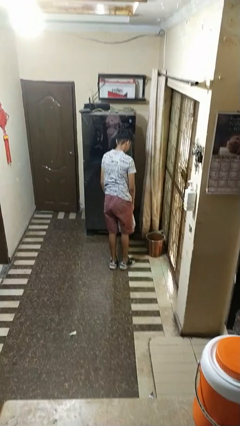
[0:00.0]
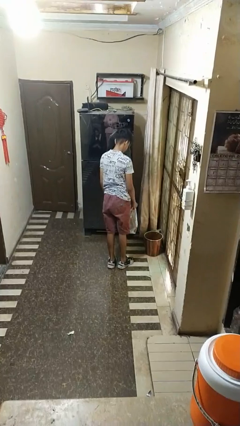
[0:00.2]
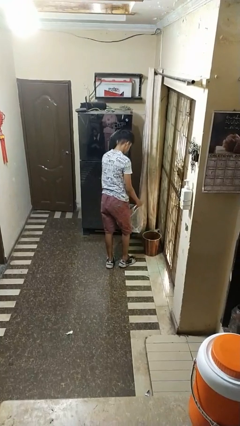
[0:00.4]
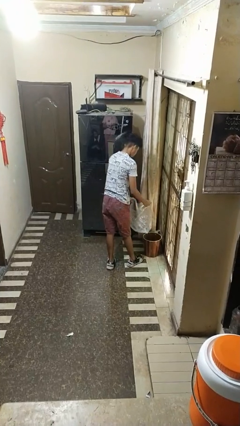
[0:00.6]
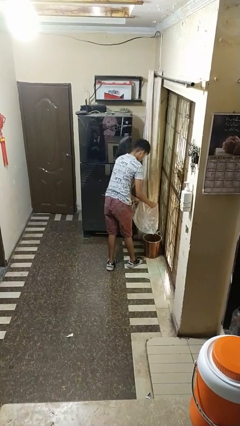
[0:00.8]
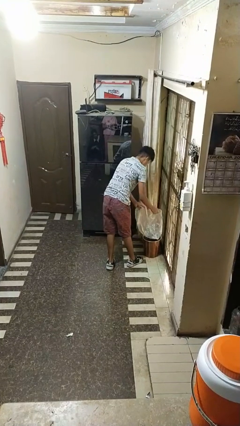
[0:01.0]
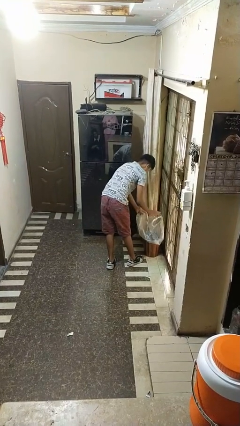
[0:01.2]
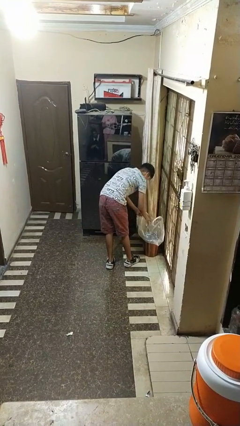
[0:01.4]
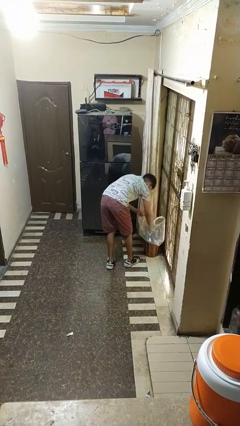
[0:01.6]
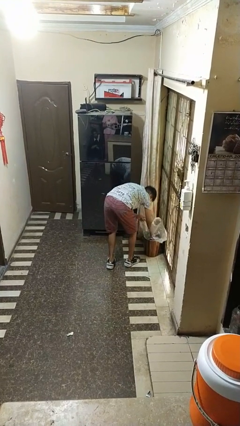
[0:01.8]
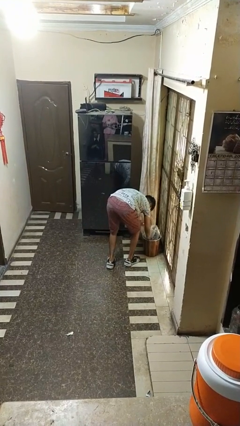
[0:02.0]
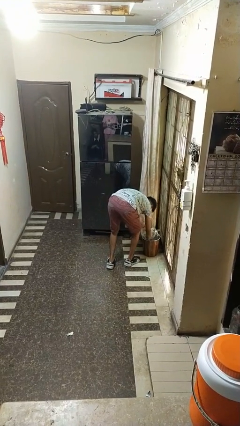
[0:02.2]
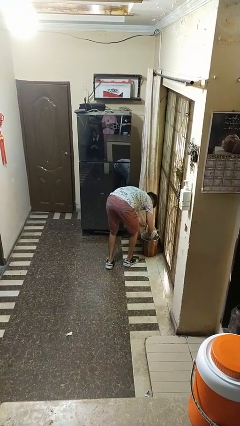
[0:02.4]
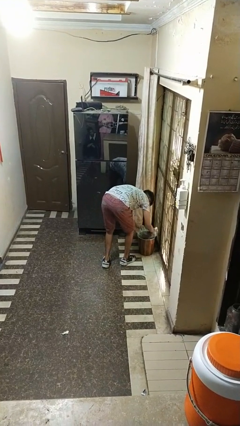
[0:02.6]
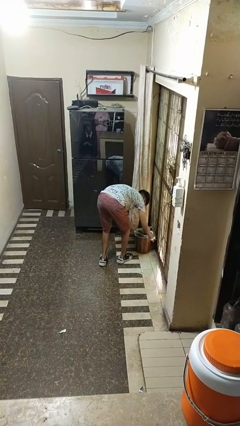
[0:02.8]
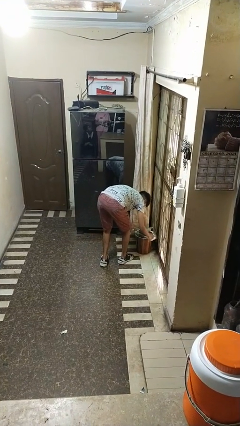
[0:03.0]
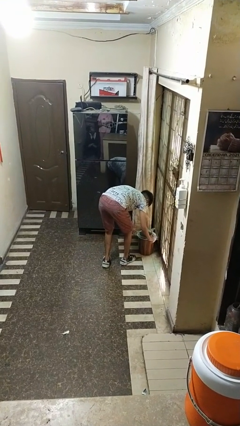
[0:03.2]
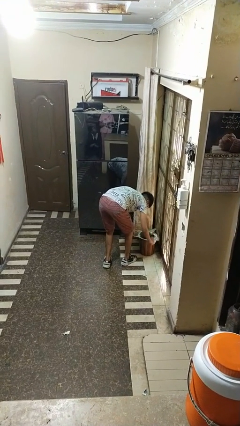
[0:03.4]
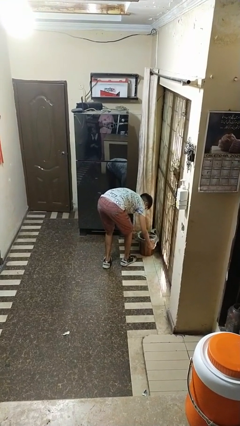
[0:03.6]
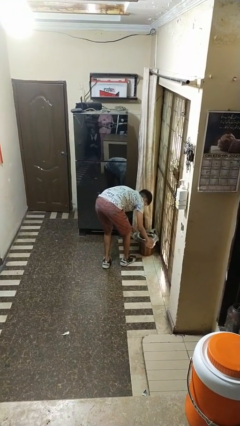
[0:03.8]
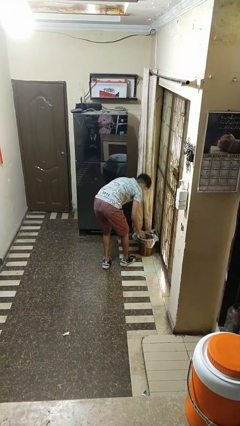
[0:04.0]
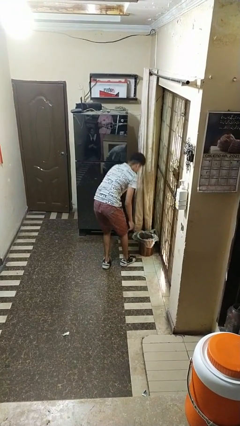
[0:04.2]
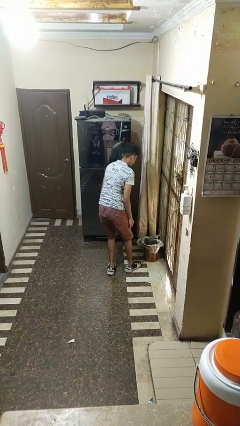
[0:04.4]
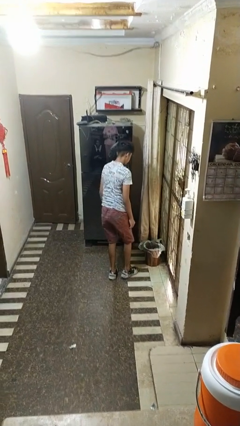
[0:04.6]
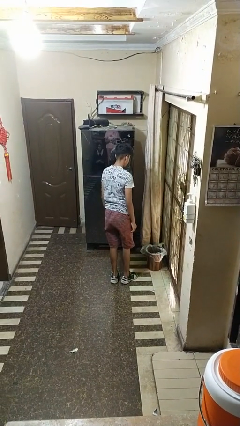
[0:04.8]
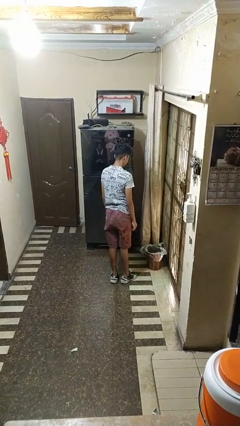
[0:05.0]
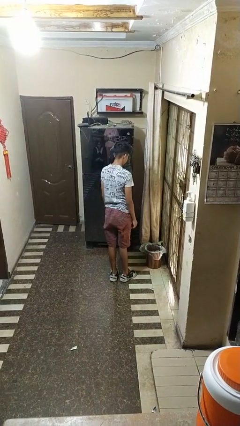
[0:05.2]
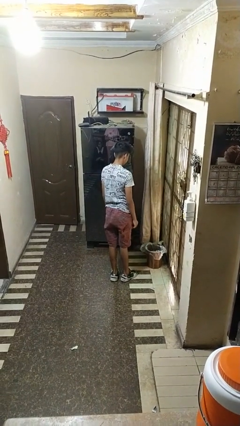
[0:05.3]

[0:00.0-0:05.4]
person inserts trashbag into trashcan

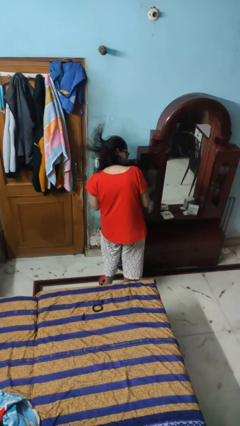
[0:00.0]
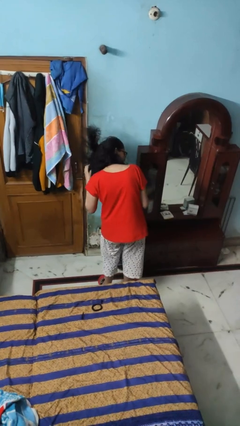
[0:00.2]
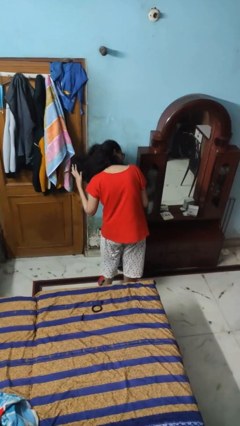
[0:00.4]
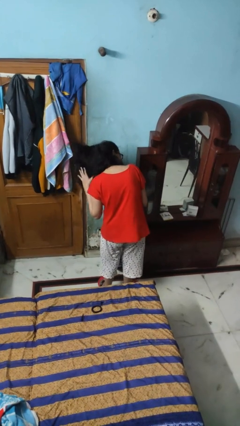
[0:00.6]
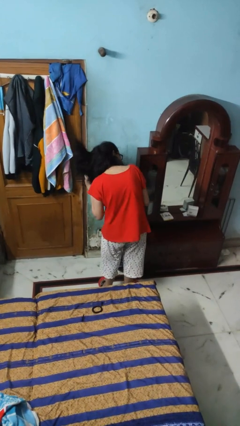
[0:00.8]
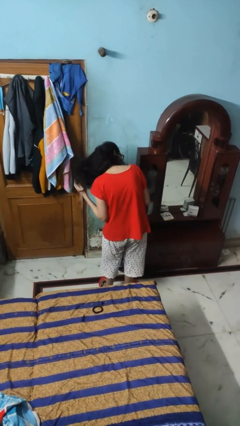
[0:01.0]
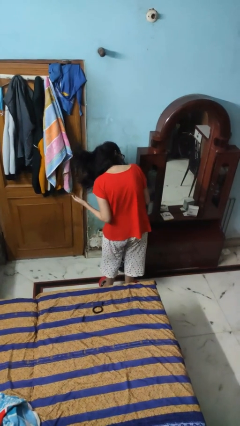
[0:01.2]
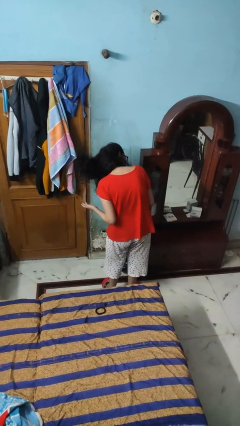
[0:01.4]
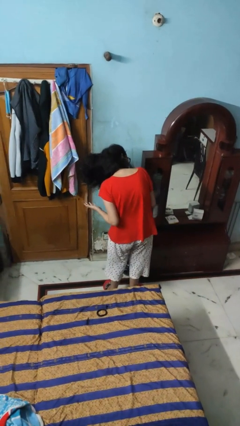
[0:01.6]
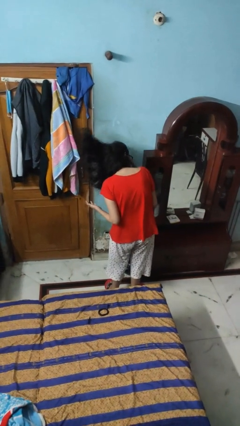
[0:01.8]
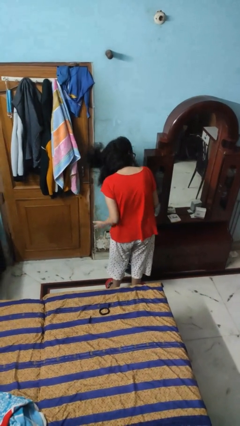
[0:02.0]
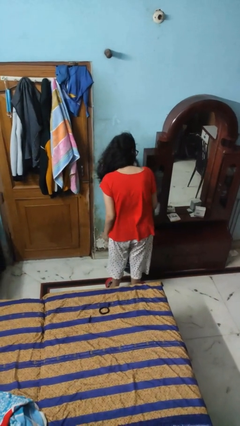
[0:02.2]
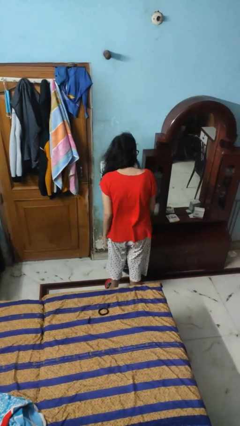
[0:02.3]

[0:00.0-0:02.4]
person dries hair with hairdryer

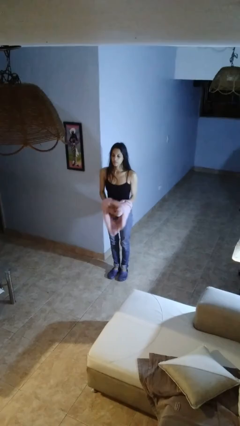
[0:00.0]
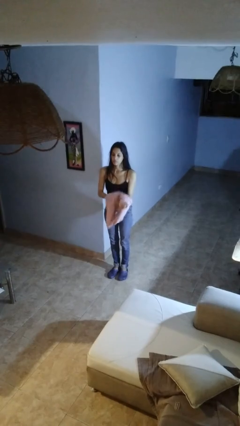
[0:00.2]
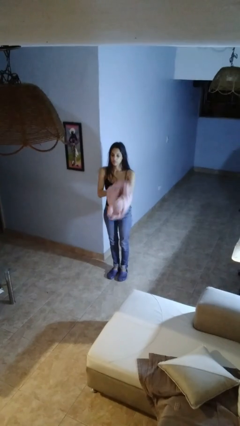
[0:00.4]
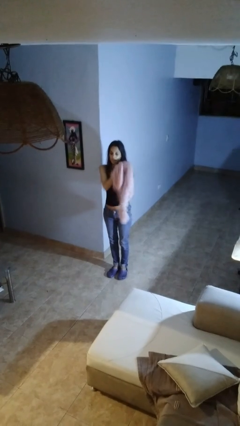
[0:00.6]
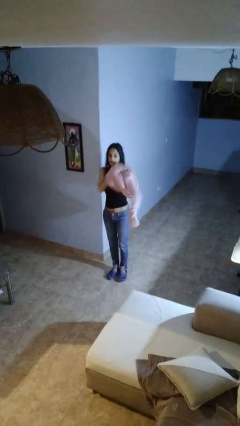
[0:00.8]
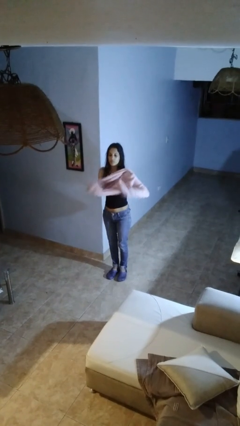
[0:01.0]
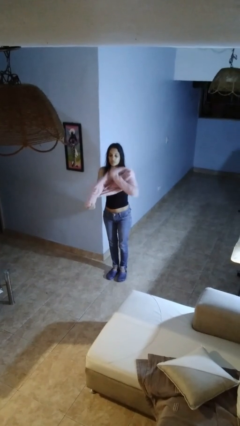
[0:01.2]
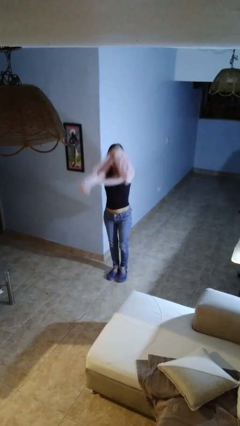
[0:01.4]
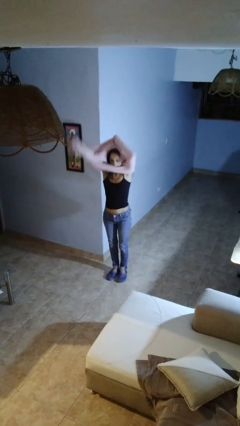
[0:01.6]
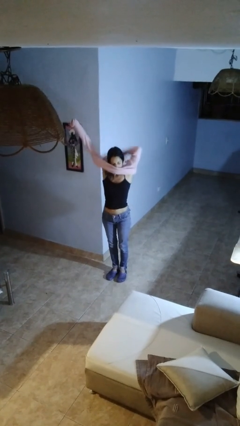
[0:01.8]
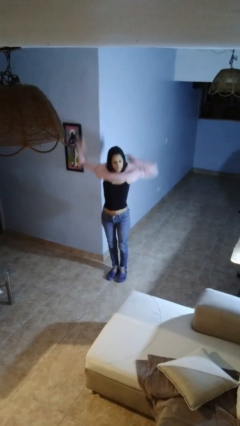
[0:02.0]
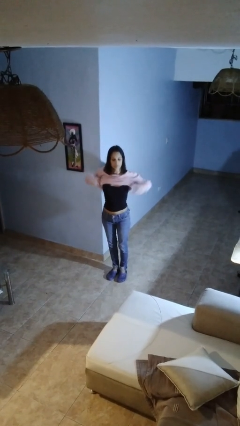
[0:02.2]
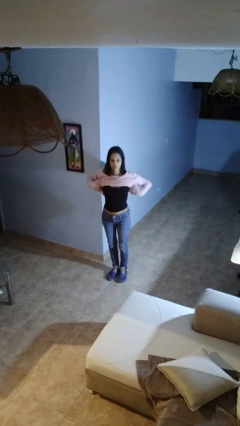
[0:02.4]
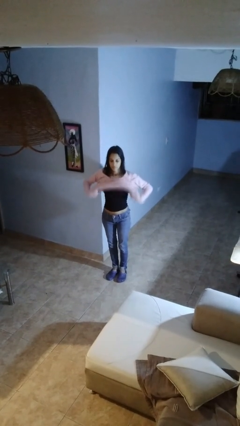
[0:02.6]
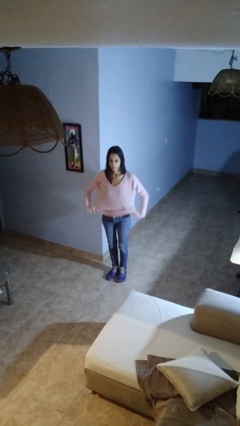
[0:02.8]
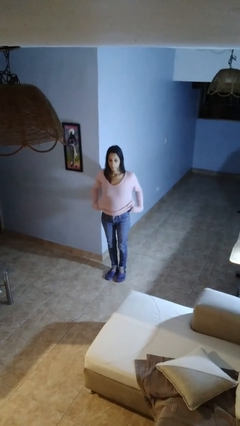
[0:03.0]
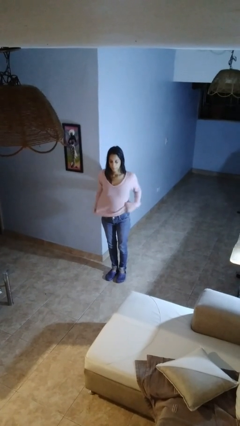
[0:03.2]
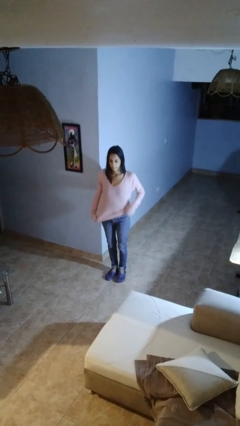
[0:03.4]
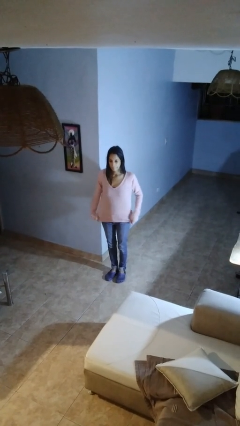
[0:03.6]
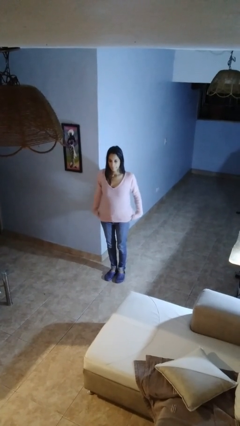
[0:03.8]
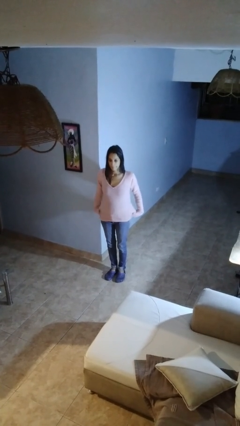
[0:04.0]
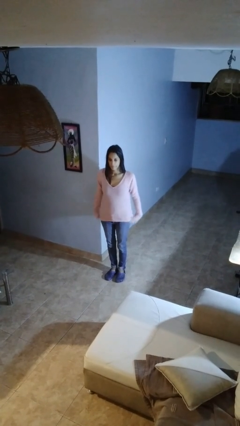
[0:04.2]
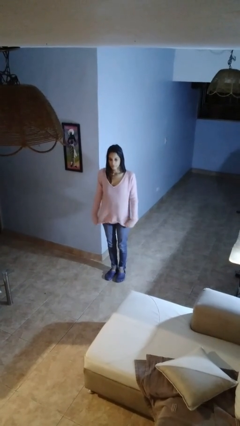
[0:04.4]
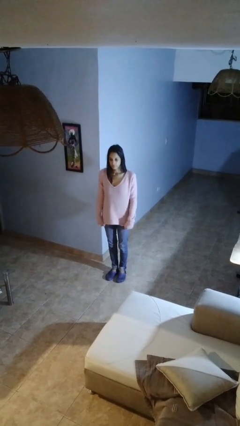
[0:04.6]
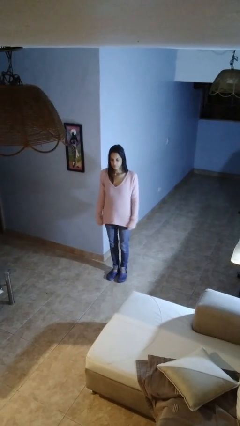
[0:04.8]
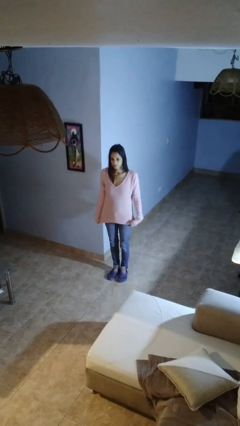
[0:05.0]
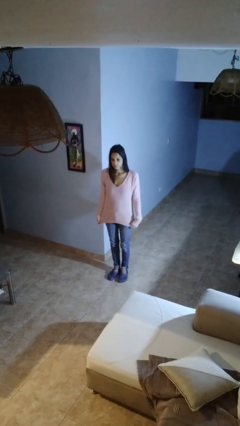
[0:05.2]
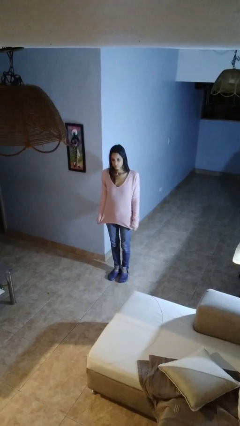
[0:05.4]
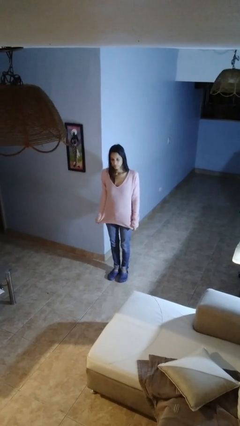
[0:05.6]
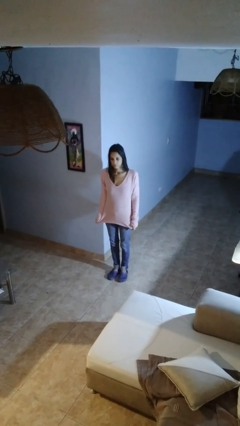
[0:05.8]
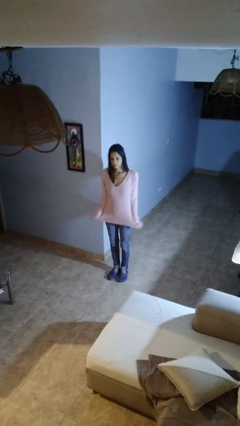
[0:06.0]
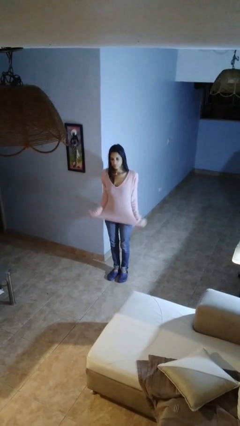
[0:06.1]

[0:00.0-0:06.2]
person puts on shirt

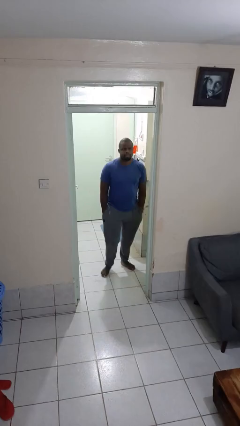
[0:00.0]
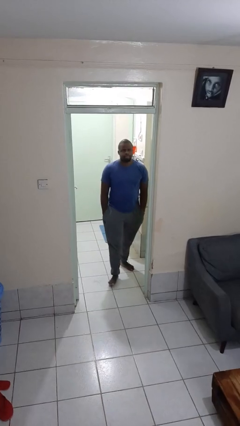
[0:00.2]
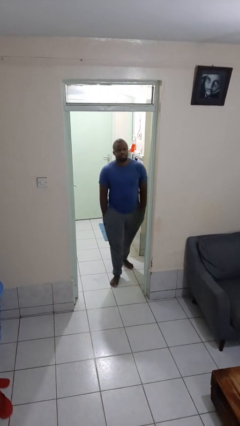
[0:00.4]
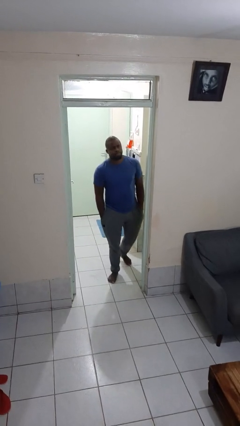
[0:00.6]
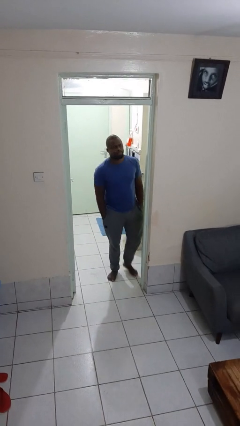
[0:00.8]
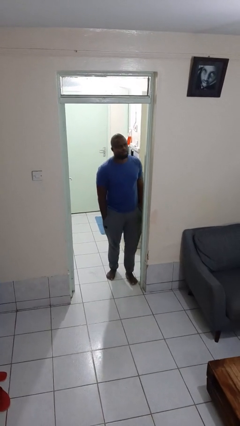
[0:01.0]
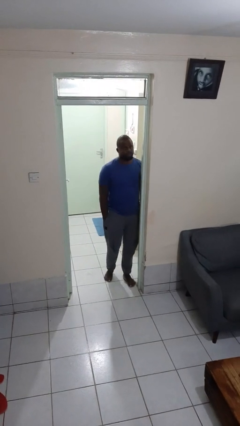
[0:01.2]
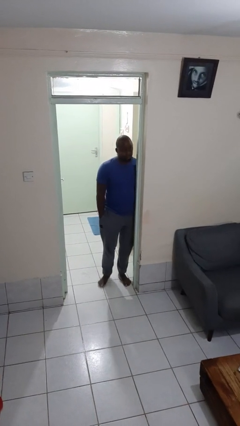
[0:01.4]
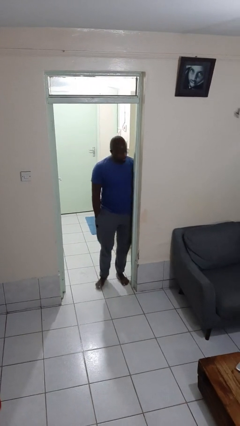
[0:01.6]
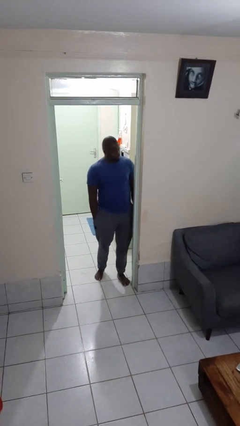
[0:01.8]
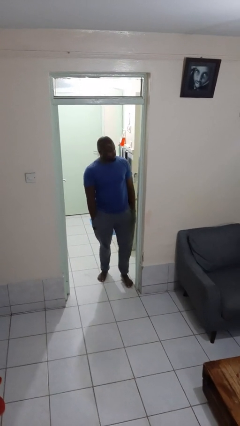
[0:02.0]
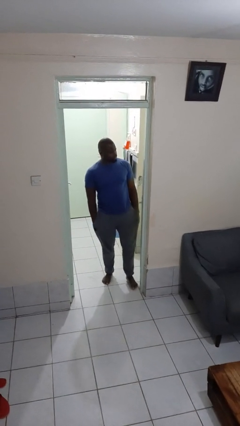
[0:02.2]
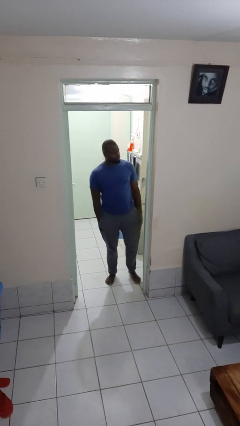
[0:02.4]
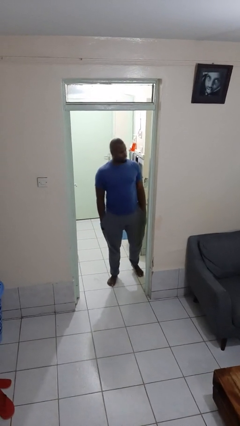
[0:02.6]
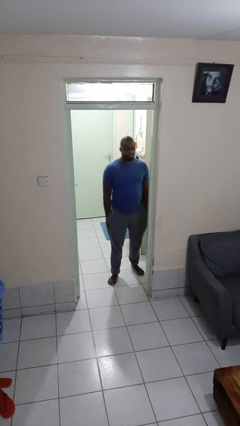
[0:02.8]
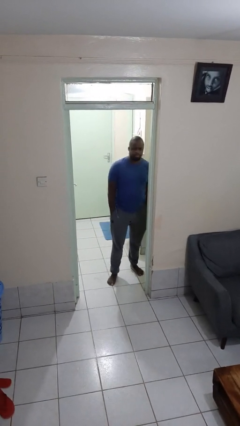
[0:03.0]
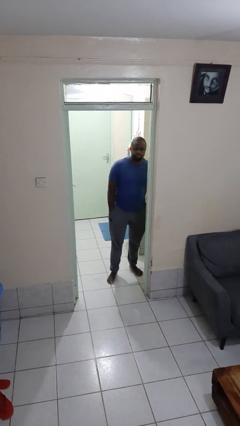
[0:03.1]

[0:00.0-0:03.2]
person bumps into wall

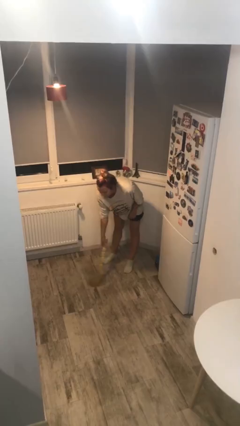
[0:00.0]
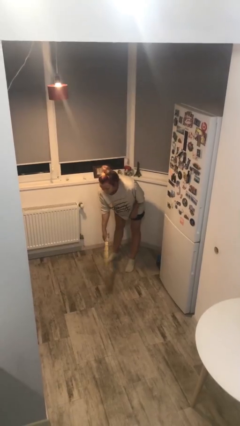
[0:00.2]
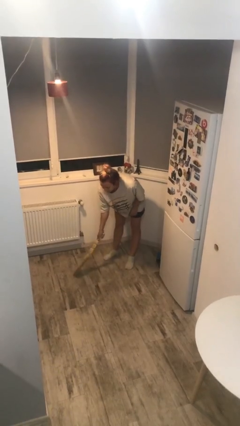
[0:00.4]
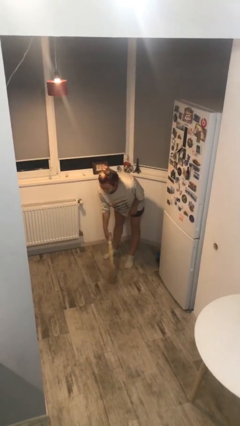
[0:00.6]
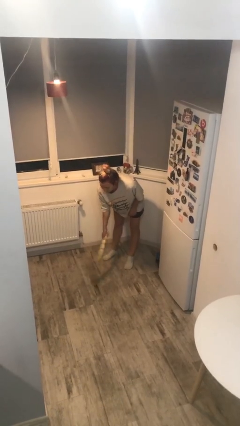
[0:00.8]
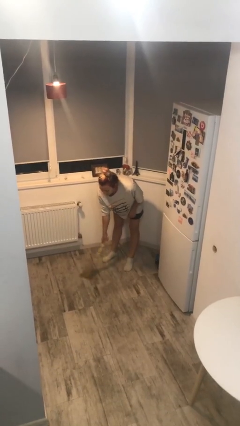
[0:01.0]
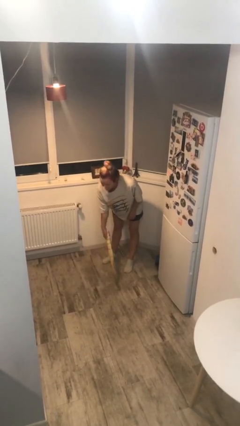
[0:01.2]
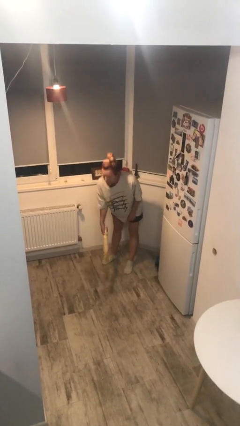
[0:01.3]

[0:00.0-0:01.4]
person sweeps floor
